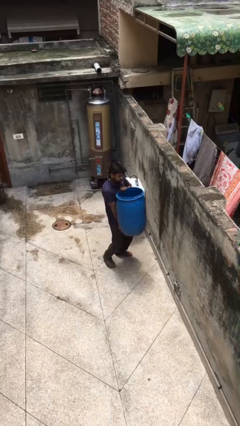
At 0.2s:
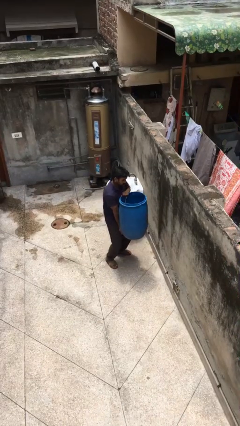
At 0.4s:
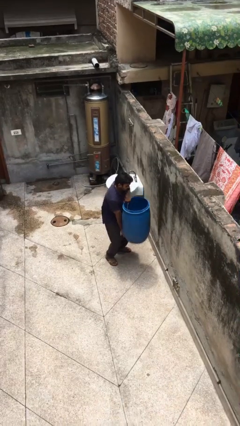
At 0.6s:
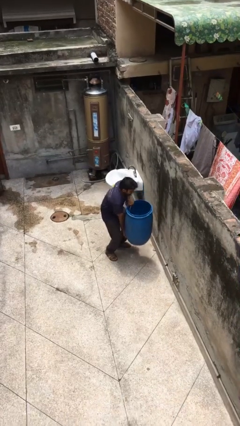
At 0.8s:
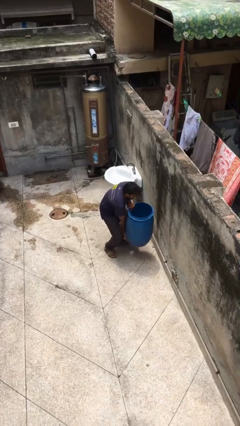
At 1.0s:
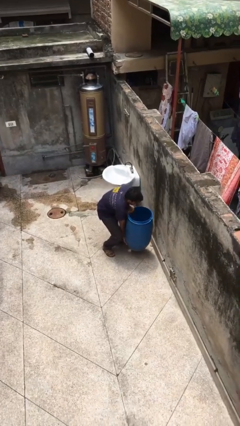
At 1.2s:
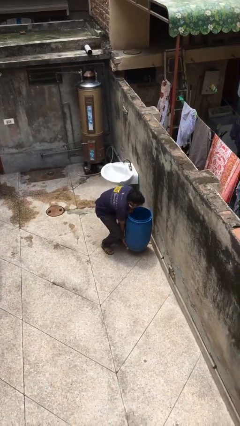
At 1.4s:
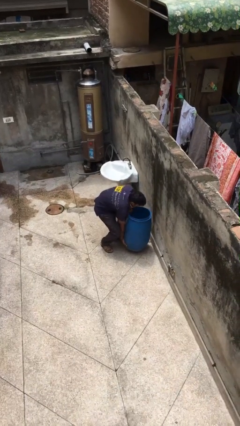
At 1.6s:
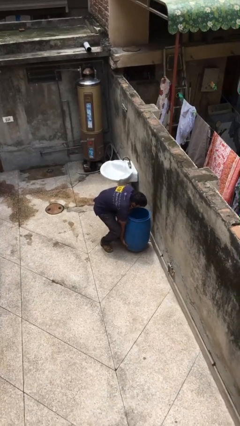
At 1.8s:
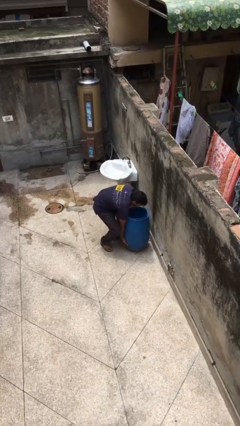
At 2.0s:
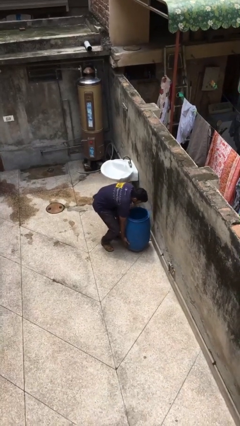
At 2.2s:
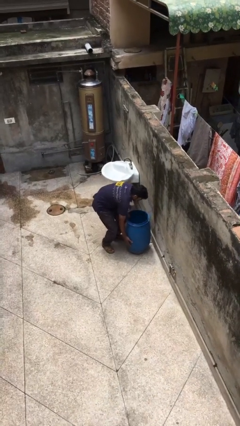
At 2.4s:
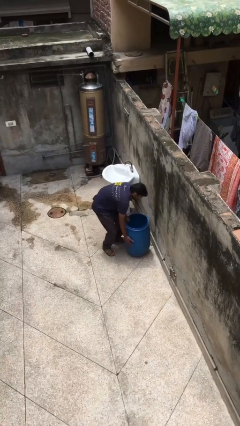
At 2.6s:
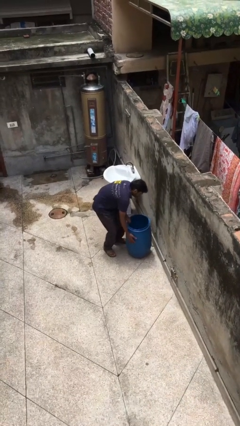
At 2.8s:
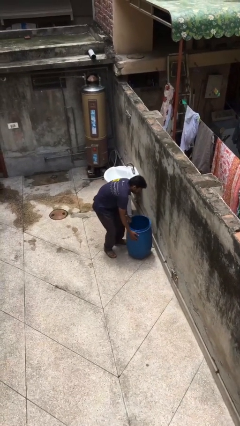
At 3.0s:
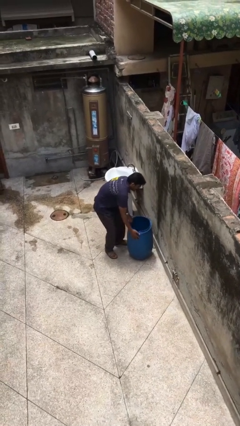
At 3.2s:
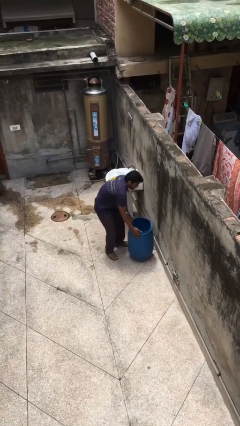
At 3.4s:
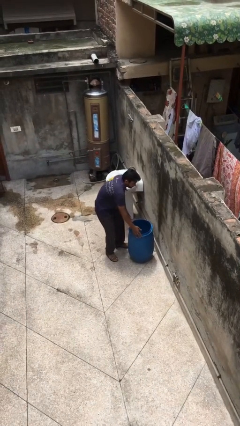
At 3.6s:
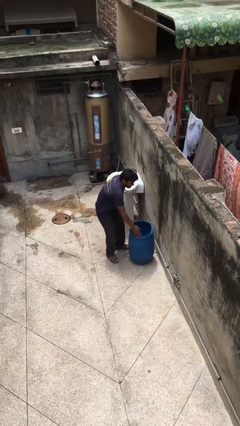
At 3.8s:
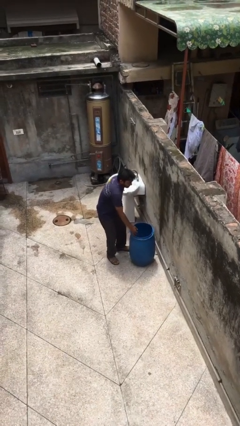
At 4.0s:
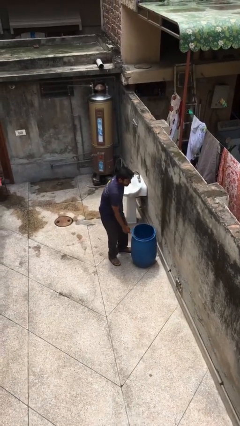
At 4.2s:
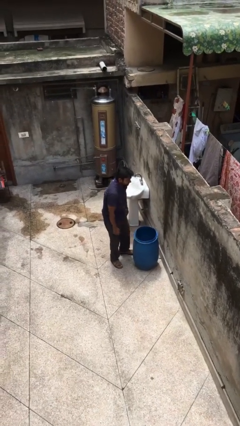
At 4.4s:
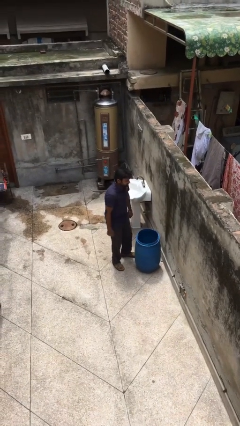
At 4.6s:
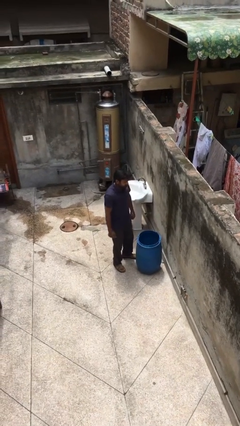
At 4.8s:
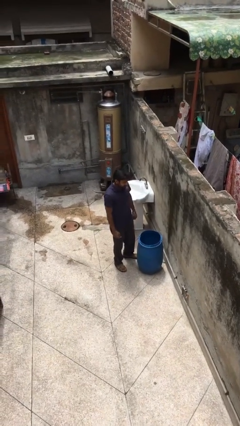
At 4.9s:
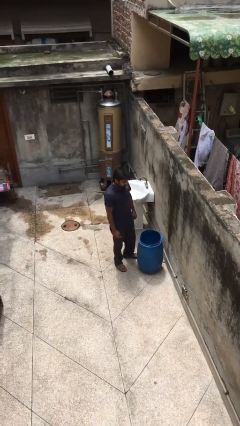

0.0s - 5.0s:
person puts down object on floor

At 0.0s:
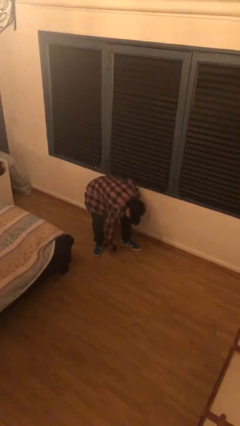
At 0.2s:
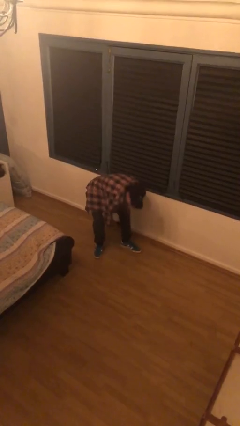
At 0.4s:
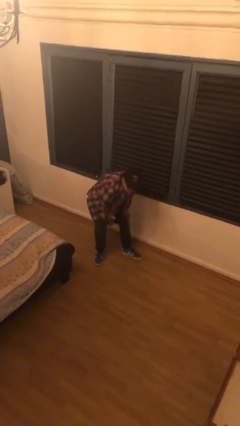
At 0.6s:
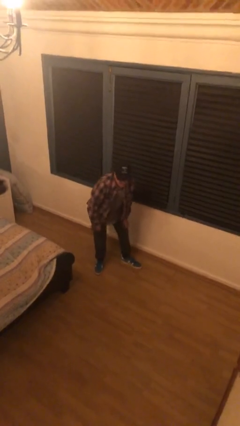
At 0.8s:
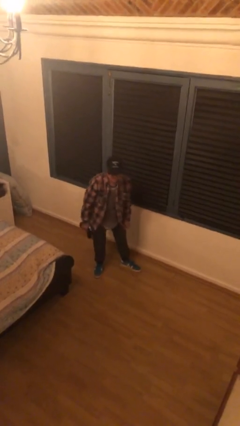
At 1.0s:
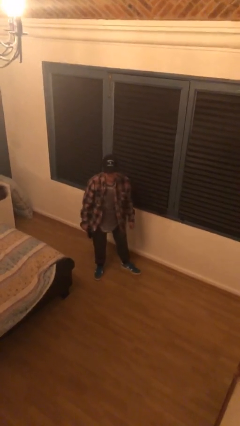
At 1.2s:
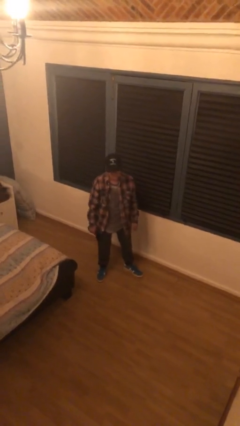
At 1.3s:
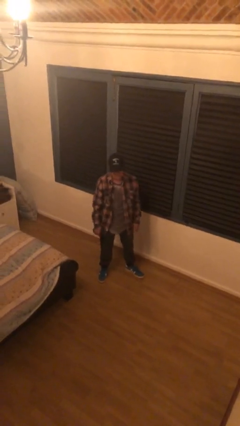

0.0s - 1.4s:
person picks up object from floor

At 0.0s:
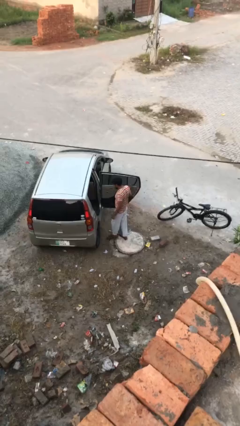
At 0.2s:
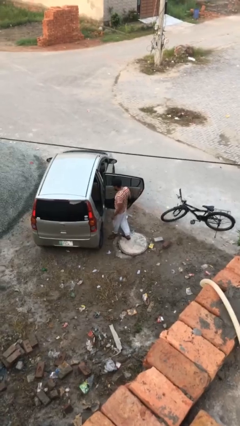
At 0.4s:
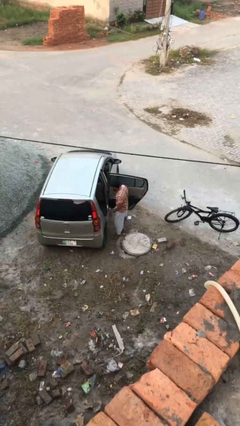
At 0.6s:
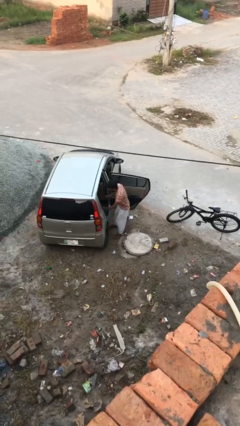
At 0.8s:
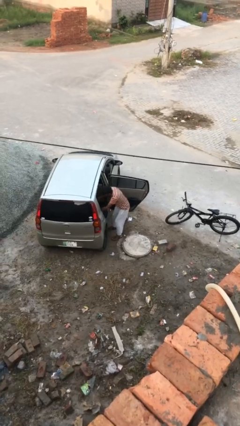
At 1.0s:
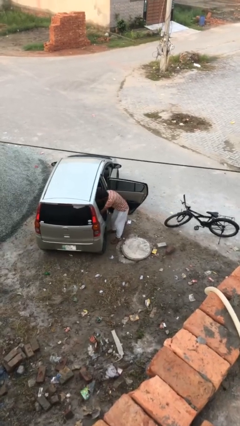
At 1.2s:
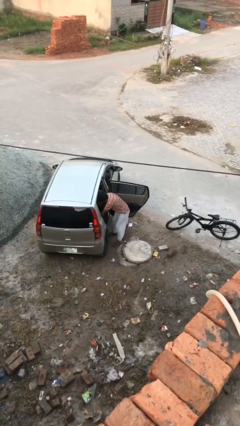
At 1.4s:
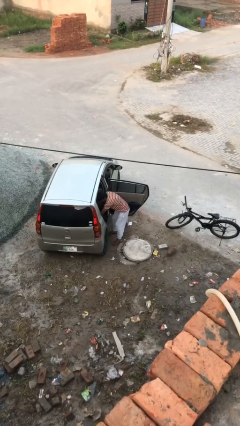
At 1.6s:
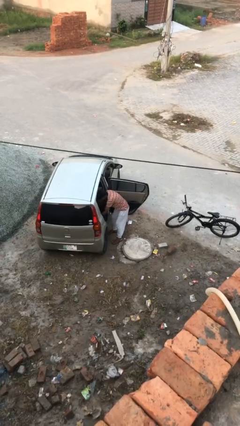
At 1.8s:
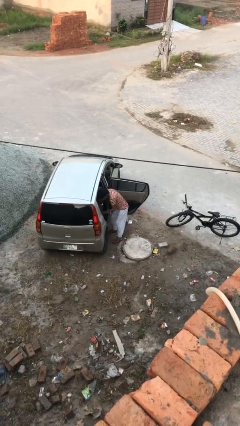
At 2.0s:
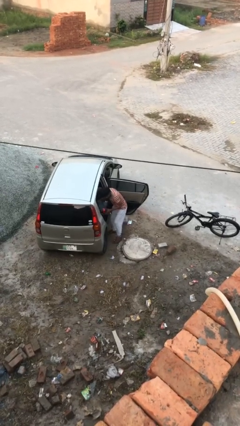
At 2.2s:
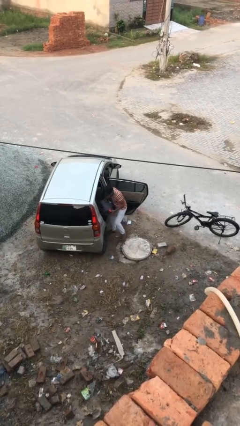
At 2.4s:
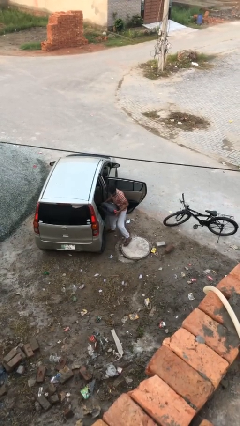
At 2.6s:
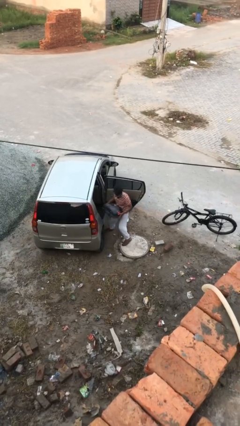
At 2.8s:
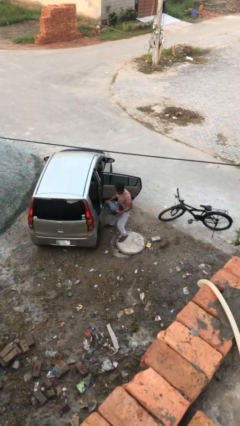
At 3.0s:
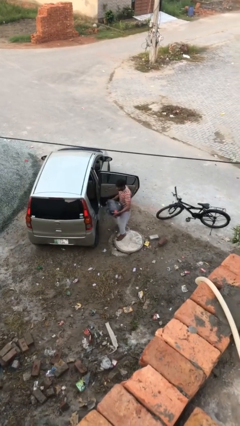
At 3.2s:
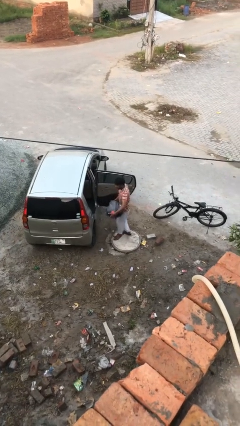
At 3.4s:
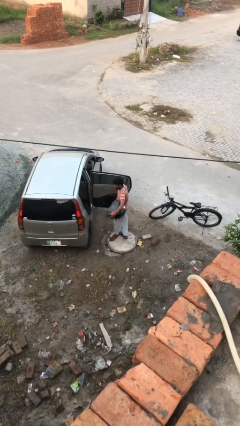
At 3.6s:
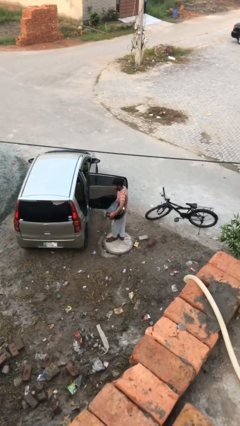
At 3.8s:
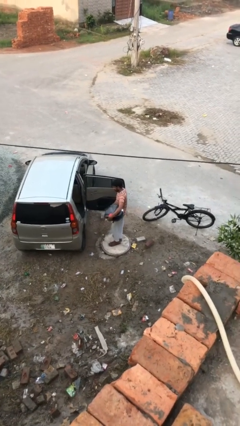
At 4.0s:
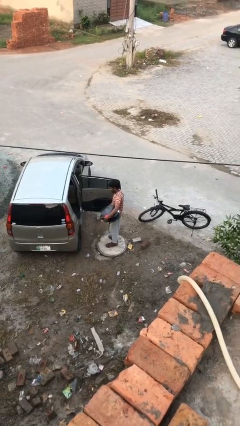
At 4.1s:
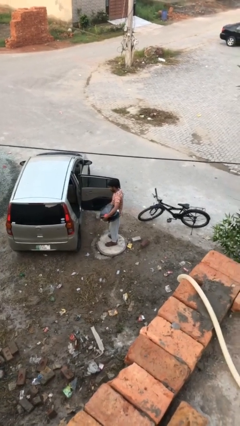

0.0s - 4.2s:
person unloads car

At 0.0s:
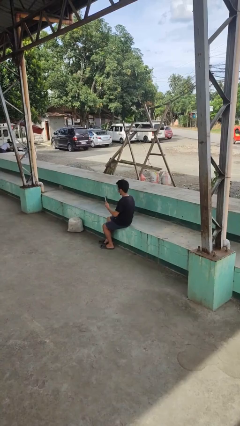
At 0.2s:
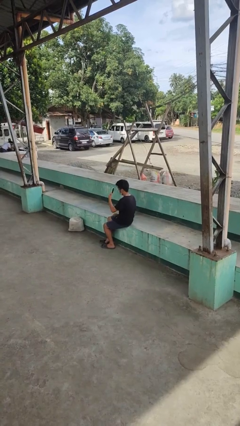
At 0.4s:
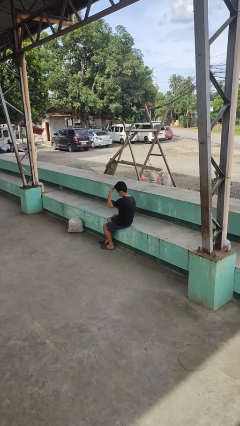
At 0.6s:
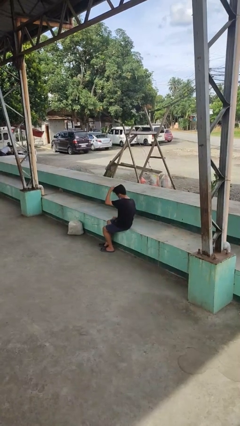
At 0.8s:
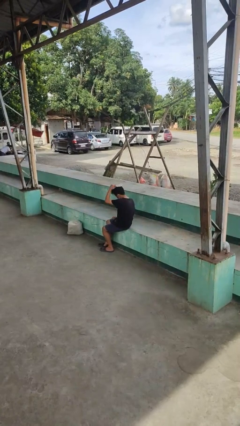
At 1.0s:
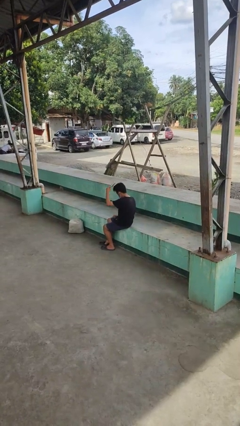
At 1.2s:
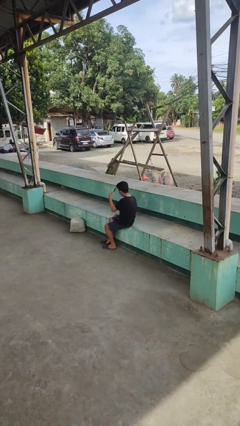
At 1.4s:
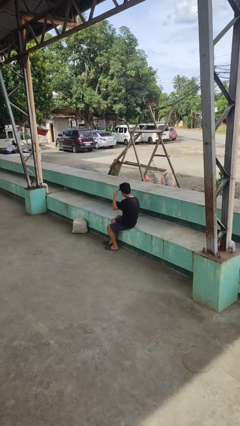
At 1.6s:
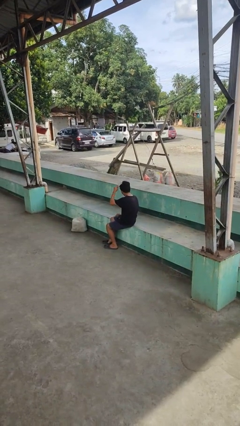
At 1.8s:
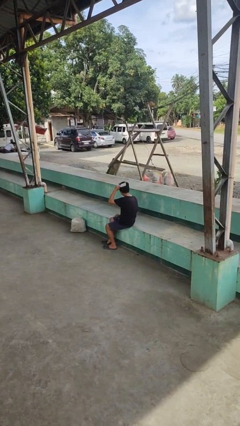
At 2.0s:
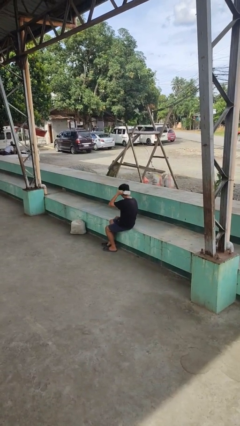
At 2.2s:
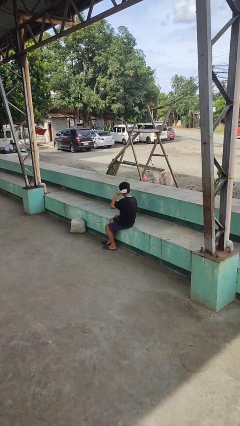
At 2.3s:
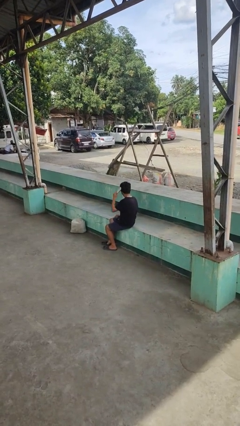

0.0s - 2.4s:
person brushes hair

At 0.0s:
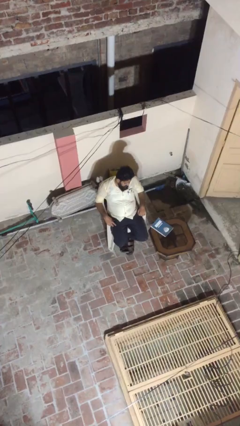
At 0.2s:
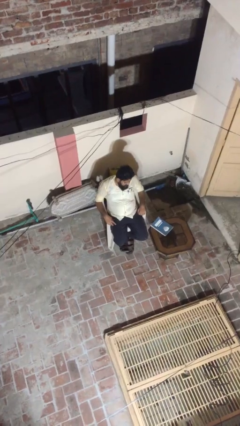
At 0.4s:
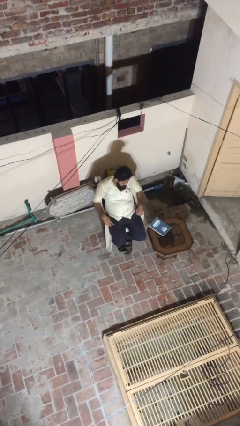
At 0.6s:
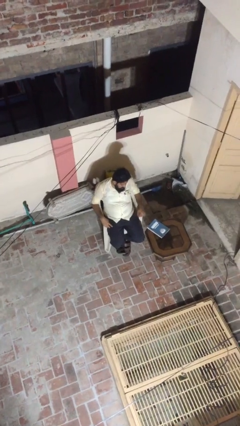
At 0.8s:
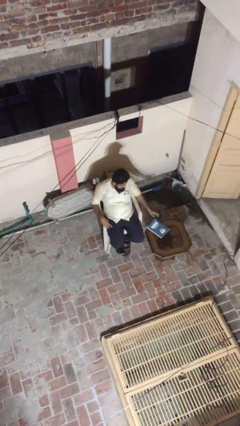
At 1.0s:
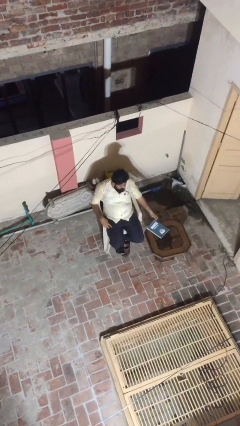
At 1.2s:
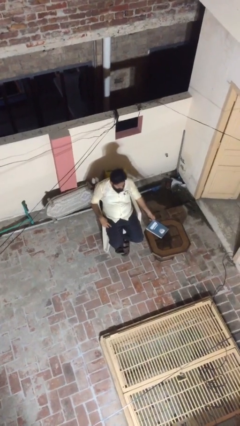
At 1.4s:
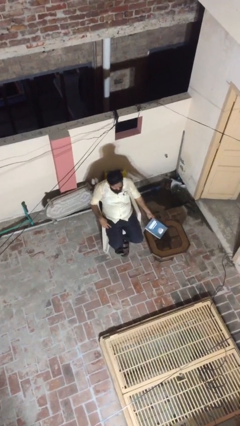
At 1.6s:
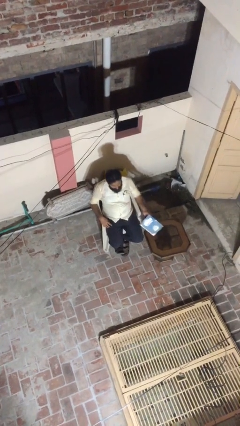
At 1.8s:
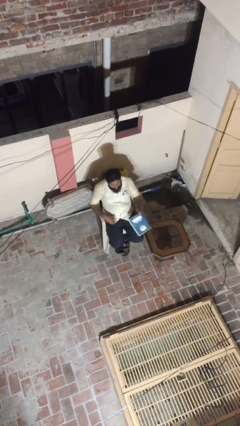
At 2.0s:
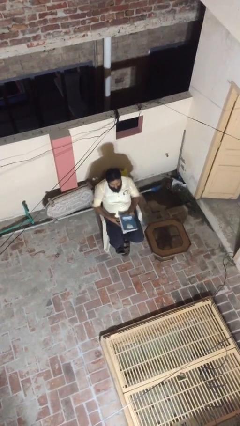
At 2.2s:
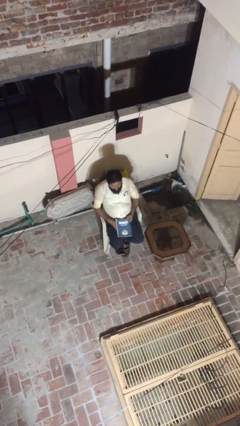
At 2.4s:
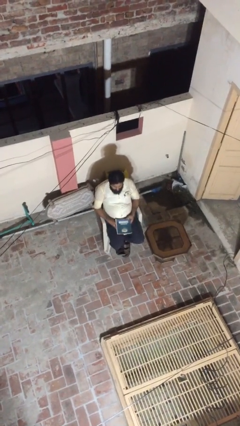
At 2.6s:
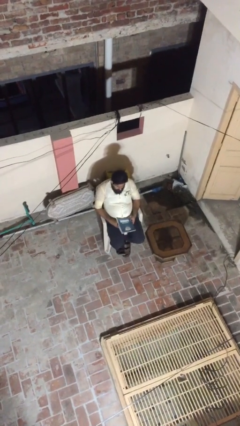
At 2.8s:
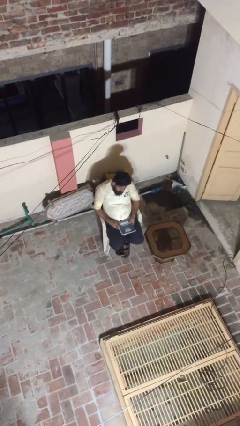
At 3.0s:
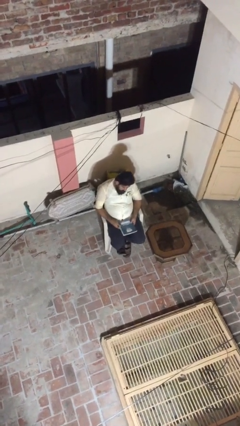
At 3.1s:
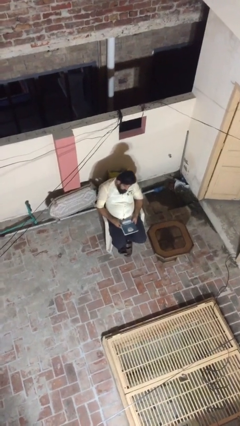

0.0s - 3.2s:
person picks up object from table

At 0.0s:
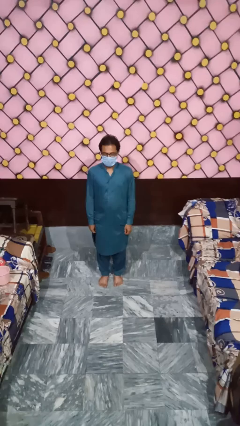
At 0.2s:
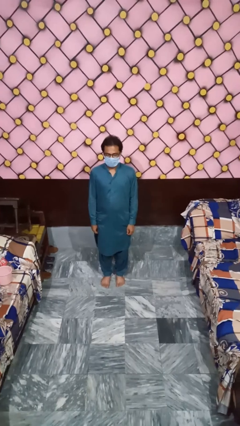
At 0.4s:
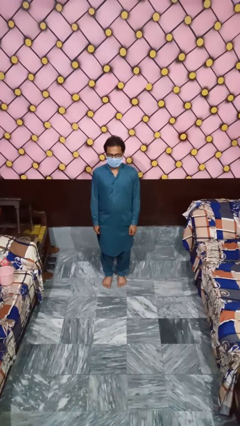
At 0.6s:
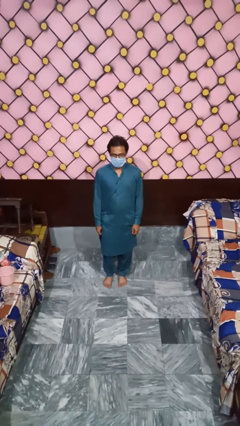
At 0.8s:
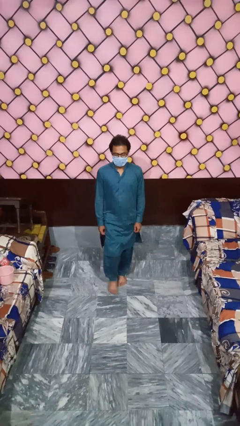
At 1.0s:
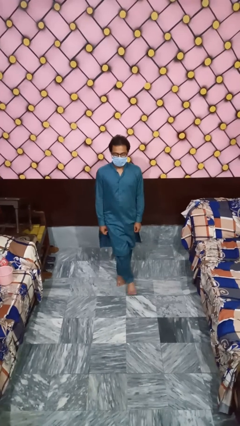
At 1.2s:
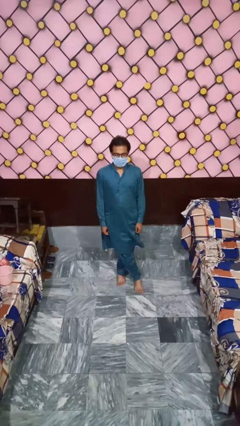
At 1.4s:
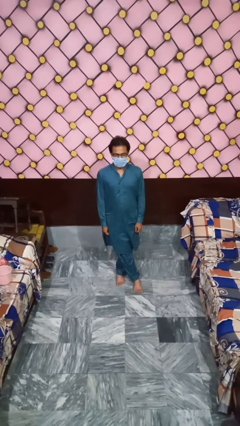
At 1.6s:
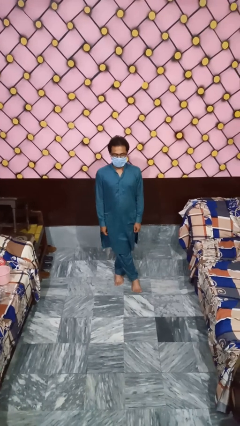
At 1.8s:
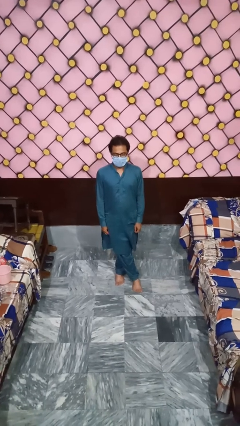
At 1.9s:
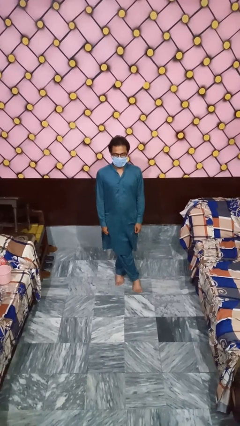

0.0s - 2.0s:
person crosses legs
